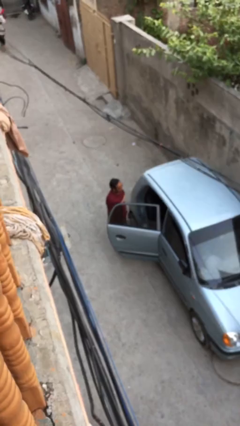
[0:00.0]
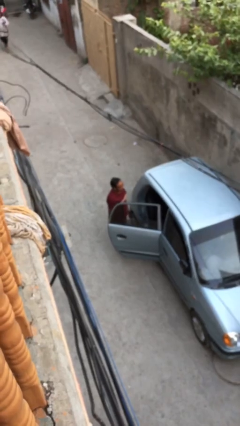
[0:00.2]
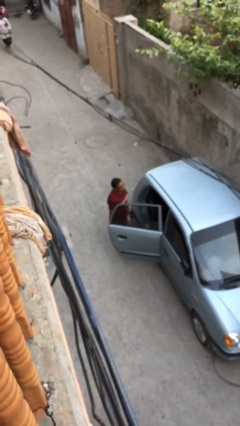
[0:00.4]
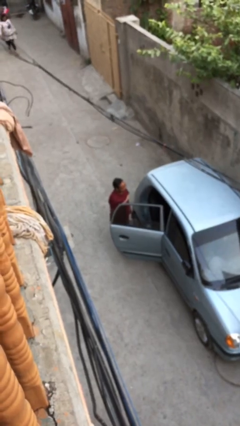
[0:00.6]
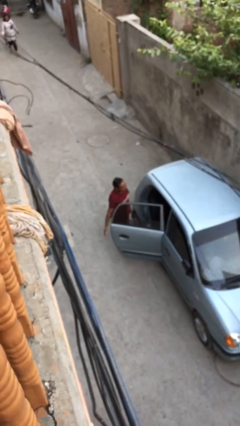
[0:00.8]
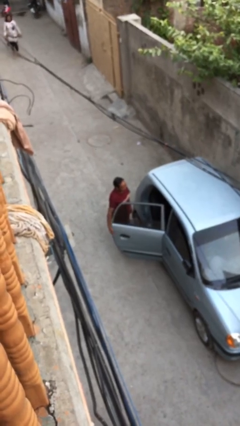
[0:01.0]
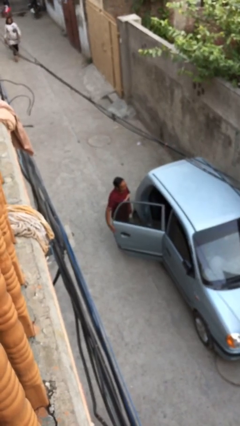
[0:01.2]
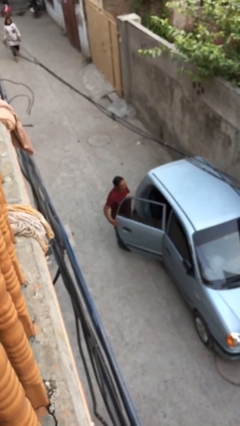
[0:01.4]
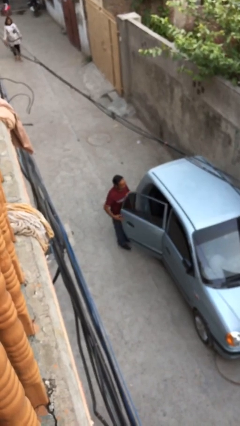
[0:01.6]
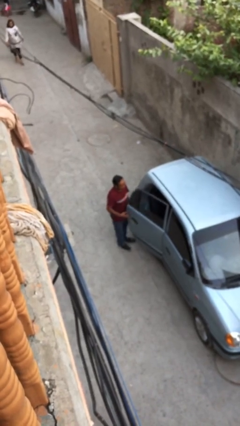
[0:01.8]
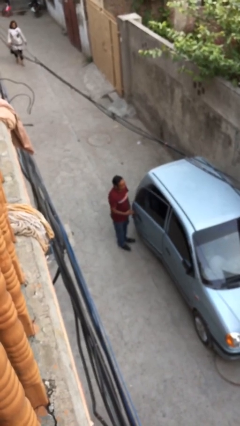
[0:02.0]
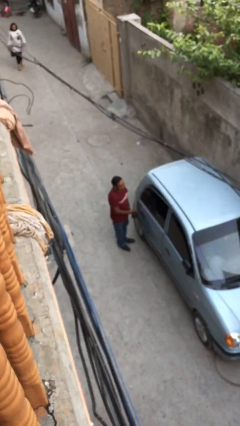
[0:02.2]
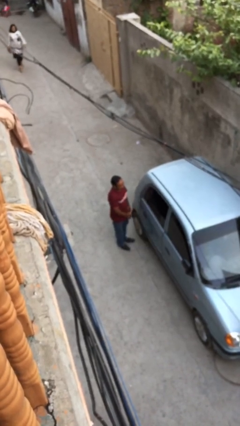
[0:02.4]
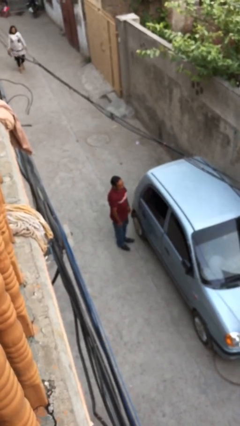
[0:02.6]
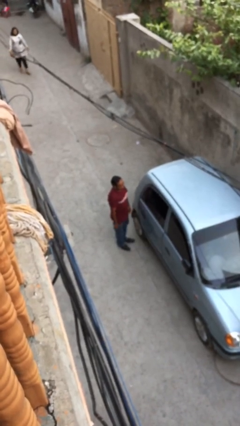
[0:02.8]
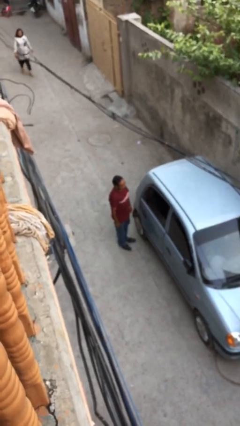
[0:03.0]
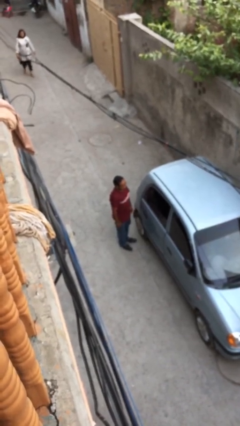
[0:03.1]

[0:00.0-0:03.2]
person closes car door

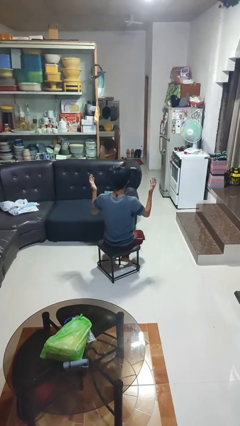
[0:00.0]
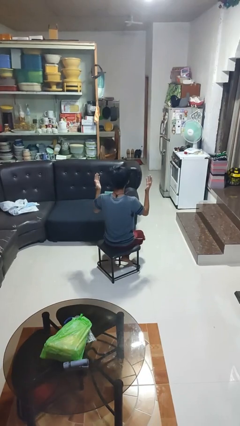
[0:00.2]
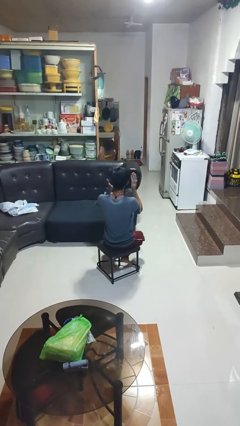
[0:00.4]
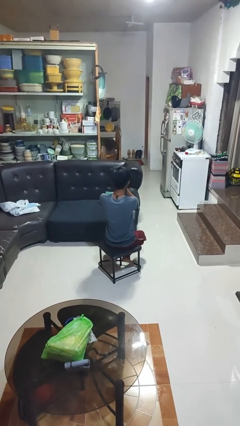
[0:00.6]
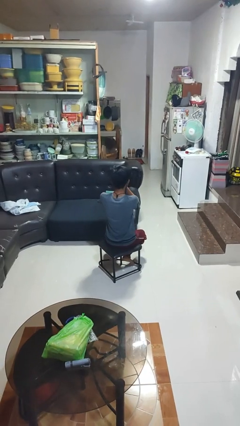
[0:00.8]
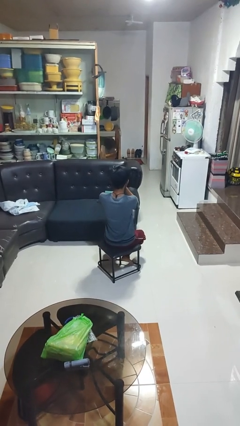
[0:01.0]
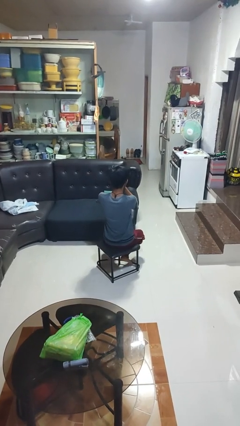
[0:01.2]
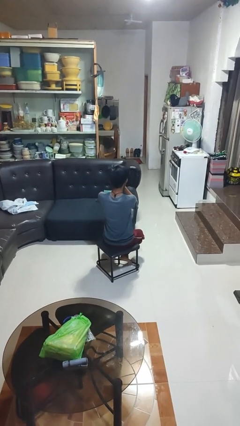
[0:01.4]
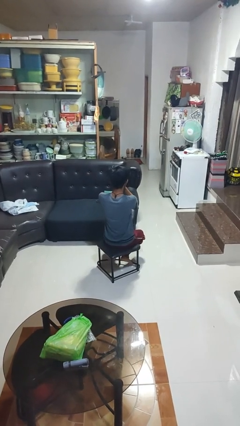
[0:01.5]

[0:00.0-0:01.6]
person covers face with hands

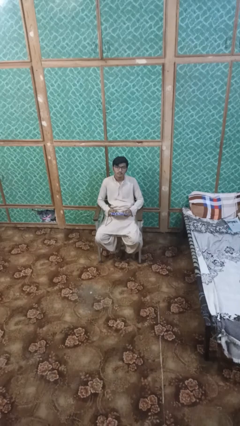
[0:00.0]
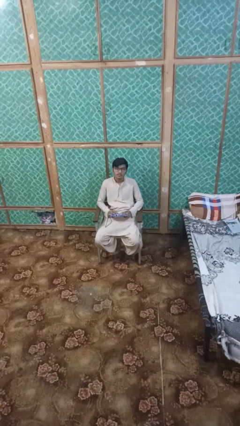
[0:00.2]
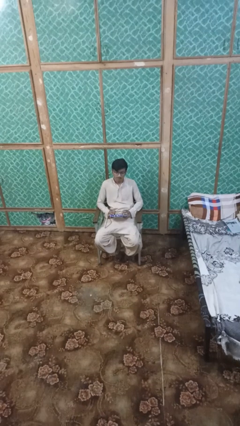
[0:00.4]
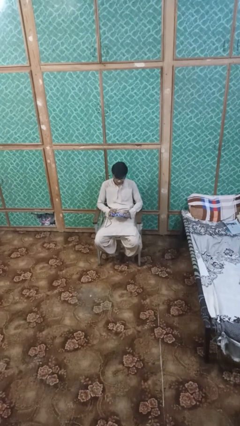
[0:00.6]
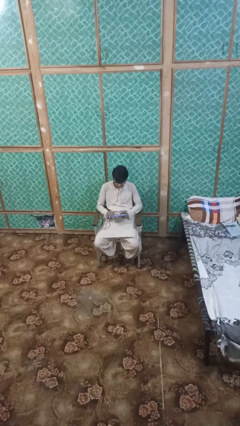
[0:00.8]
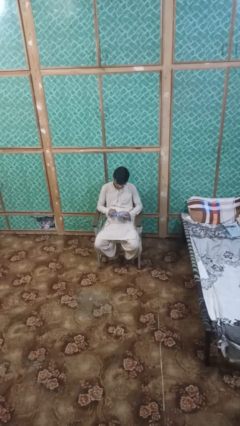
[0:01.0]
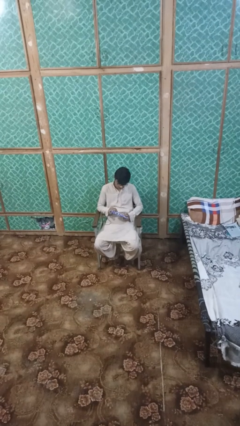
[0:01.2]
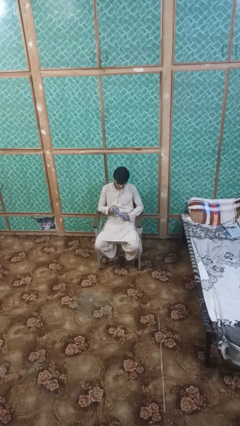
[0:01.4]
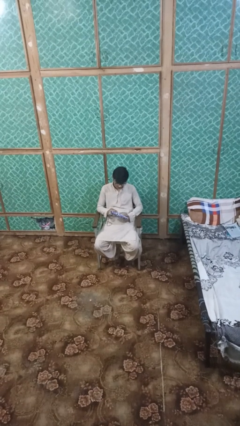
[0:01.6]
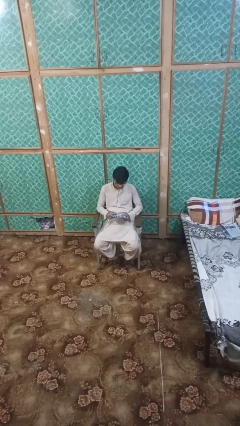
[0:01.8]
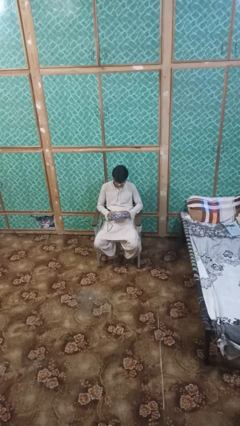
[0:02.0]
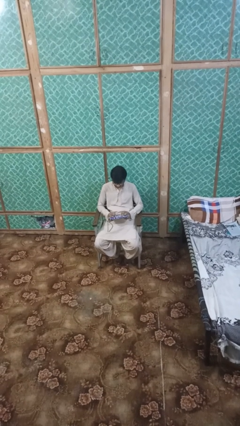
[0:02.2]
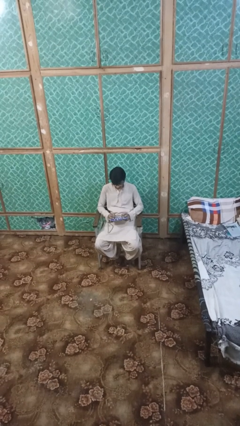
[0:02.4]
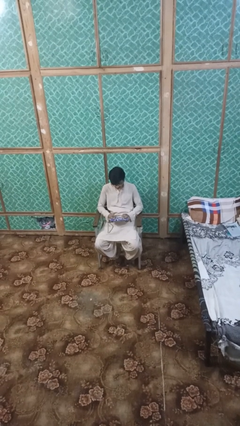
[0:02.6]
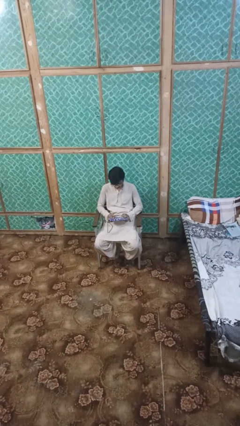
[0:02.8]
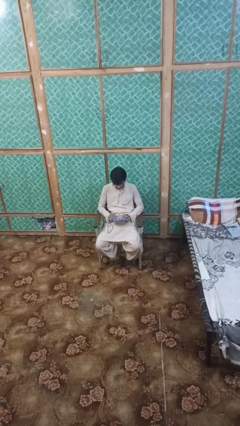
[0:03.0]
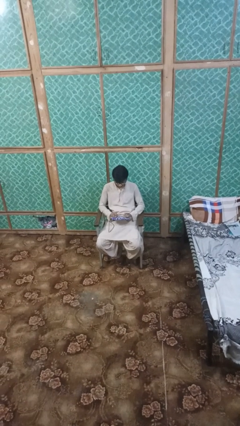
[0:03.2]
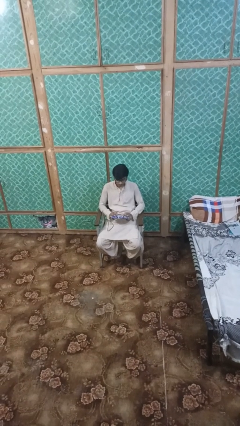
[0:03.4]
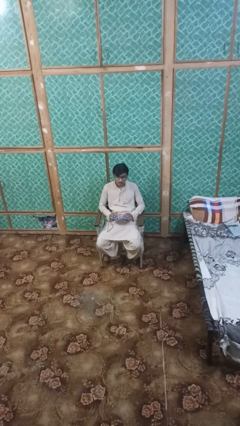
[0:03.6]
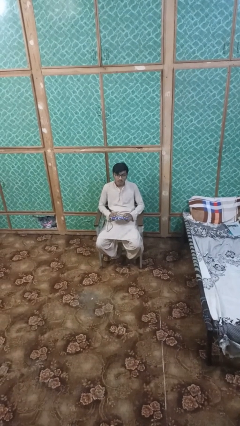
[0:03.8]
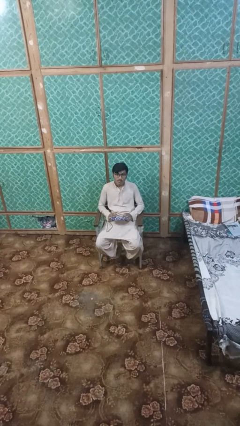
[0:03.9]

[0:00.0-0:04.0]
person interacts with handheld game

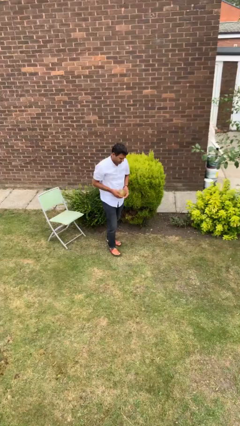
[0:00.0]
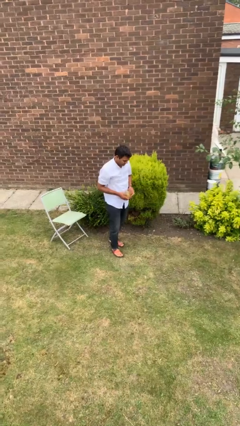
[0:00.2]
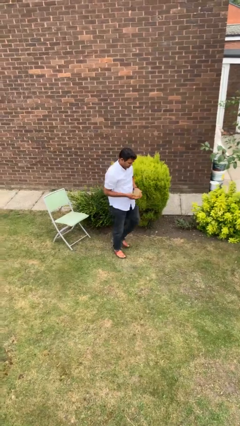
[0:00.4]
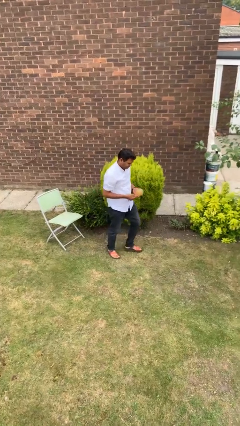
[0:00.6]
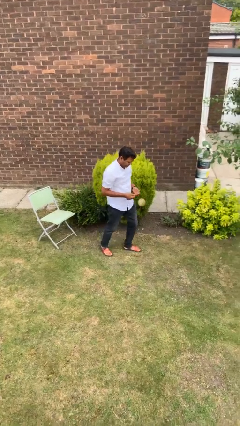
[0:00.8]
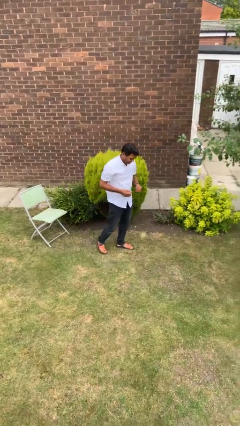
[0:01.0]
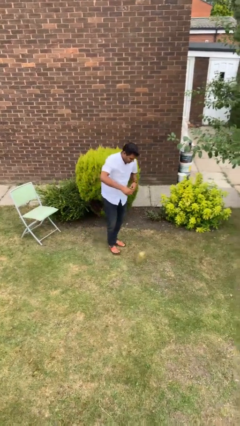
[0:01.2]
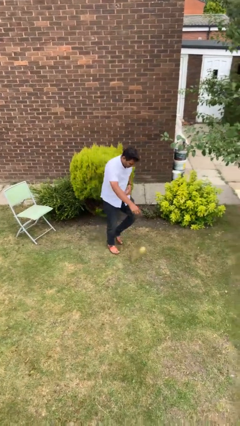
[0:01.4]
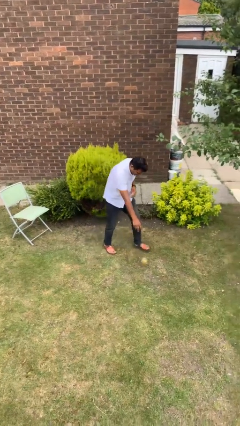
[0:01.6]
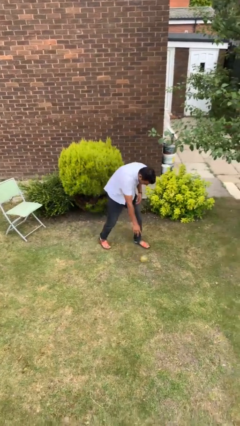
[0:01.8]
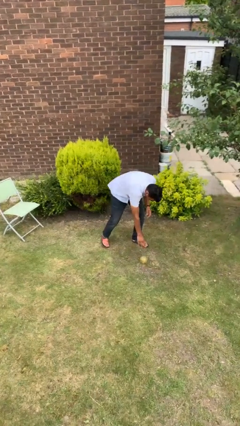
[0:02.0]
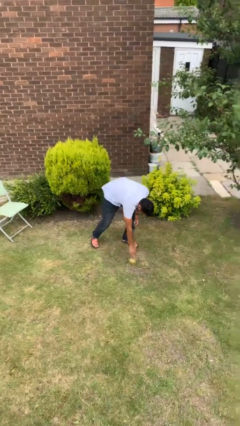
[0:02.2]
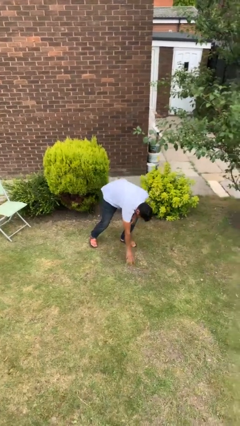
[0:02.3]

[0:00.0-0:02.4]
person drops object

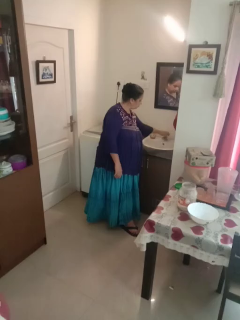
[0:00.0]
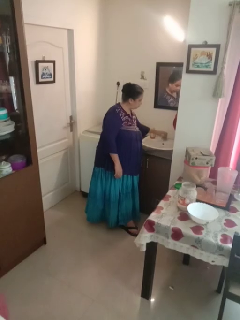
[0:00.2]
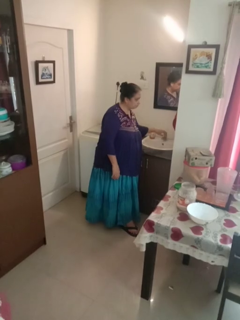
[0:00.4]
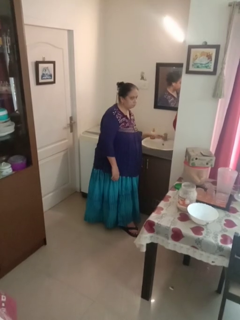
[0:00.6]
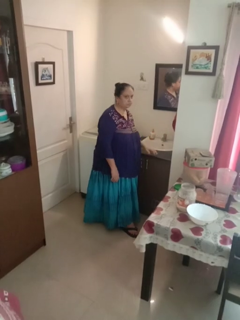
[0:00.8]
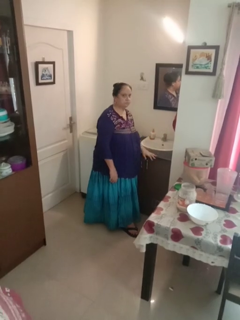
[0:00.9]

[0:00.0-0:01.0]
person turns off faucet

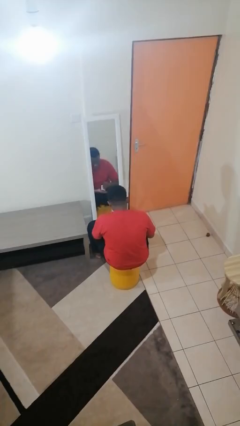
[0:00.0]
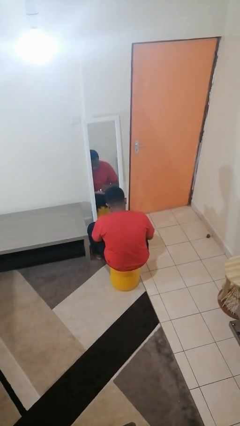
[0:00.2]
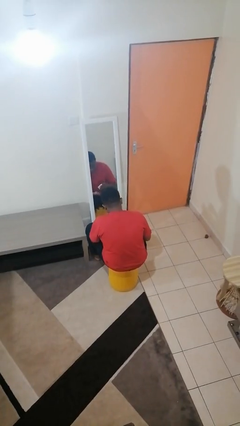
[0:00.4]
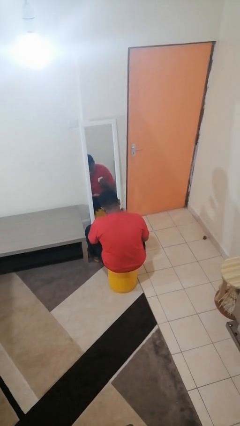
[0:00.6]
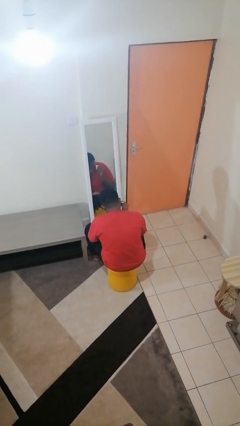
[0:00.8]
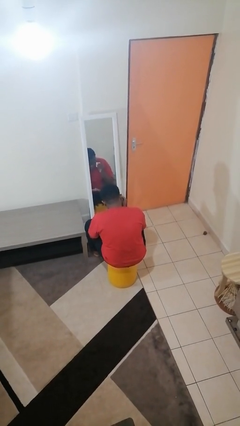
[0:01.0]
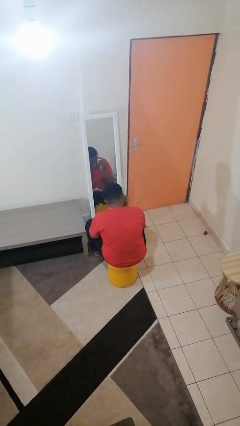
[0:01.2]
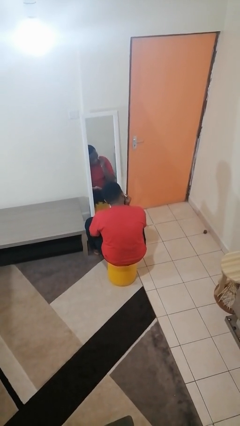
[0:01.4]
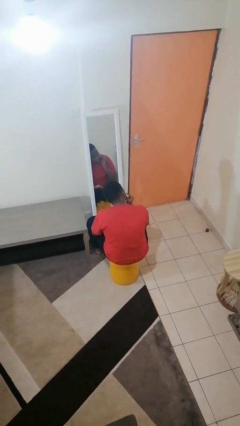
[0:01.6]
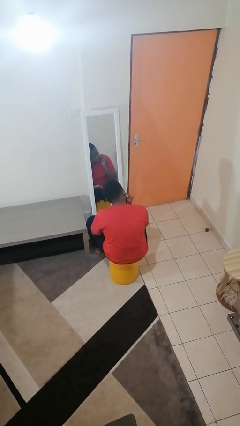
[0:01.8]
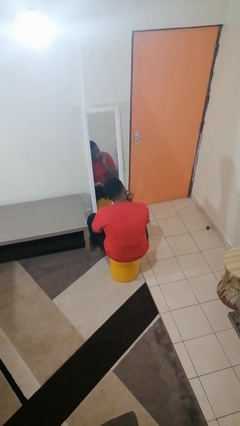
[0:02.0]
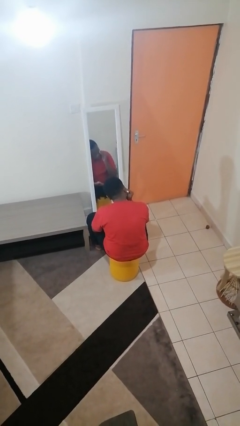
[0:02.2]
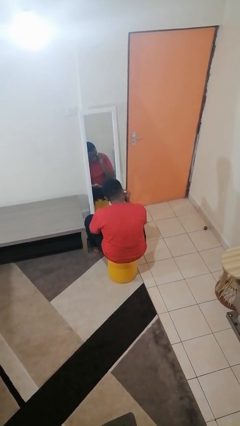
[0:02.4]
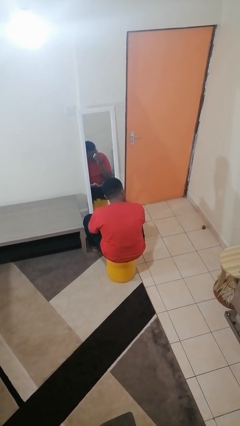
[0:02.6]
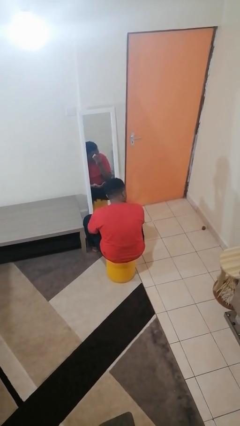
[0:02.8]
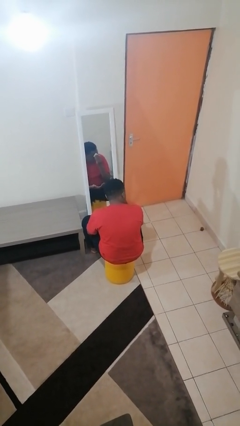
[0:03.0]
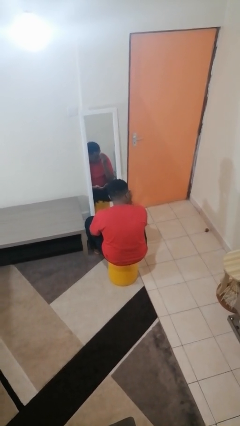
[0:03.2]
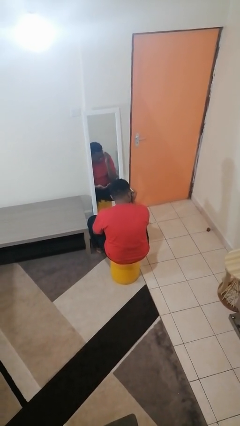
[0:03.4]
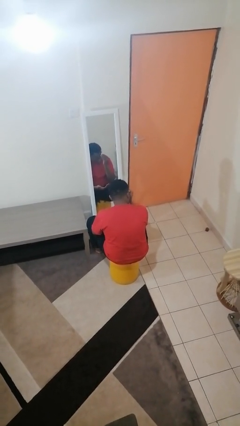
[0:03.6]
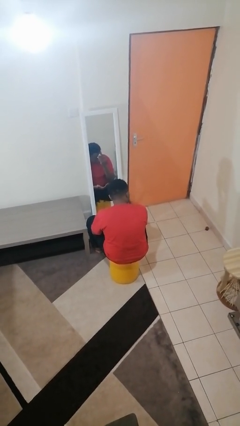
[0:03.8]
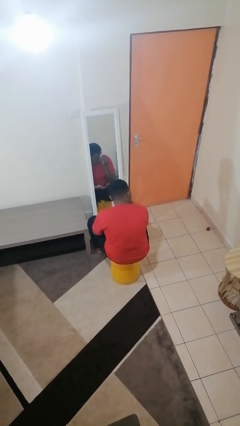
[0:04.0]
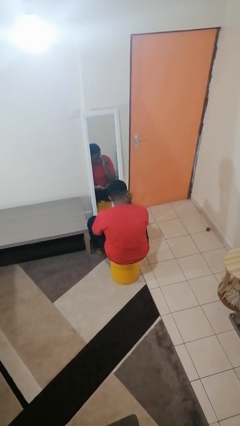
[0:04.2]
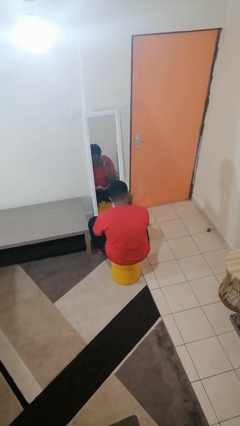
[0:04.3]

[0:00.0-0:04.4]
person applies foundation makeup

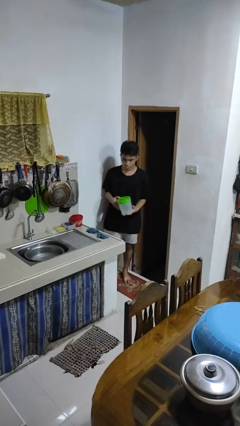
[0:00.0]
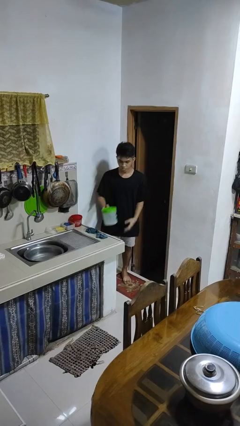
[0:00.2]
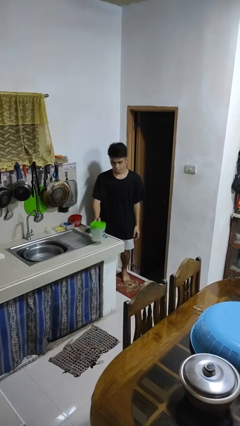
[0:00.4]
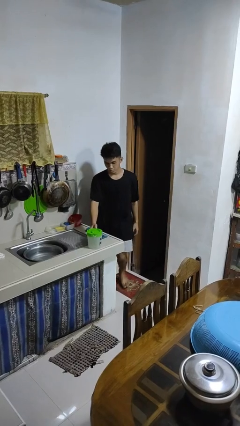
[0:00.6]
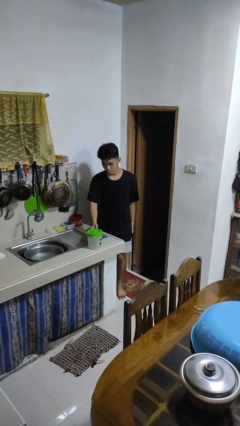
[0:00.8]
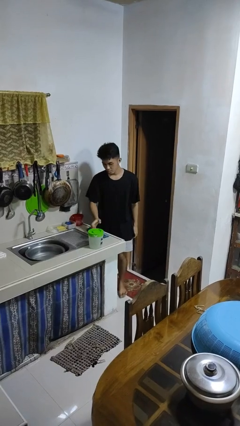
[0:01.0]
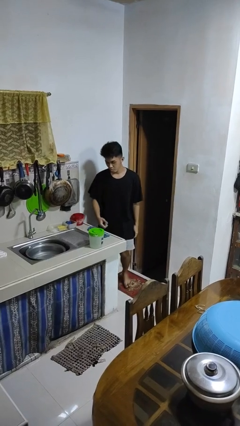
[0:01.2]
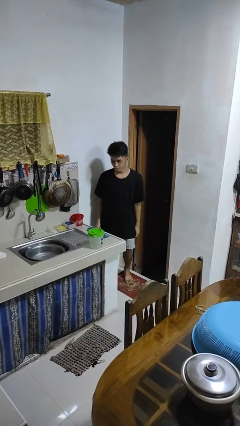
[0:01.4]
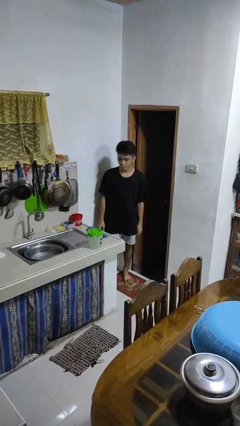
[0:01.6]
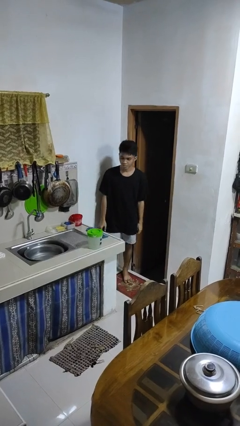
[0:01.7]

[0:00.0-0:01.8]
person puts down object on countertop
